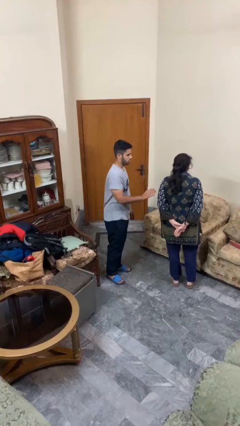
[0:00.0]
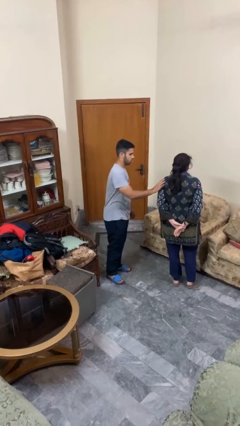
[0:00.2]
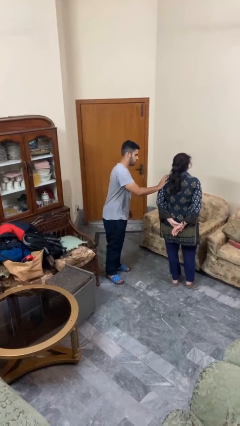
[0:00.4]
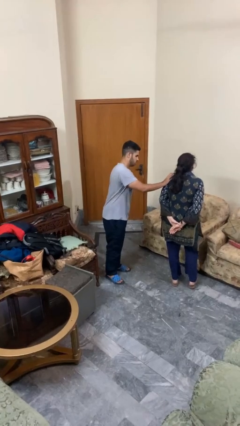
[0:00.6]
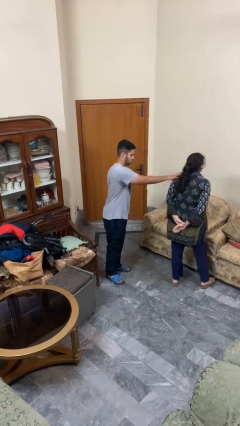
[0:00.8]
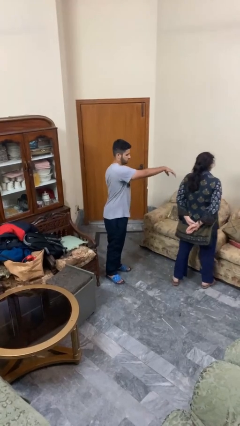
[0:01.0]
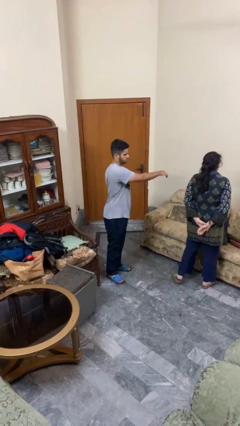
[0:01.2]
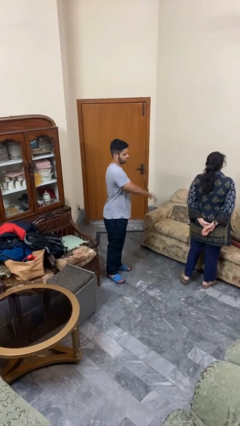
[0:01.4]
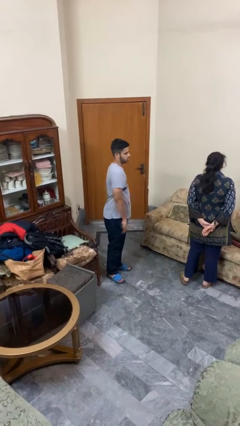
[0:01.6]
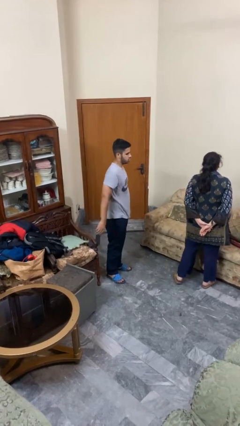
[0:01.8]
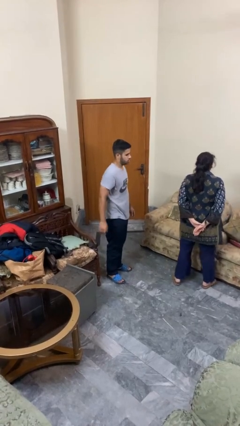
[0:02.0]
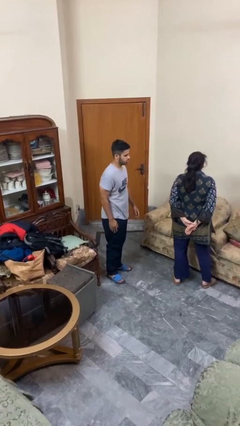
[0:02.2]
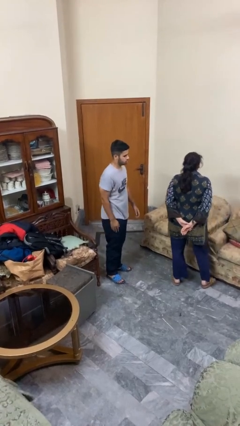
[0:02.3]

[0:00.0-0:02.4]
person shoves person

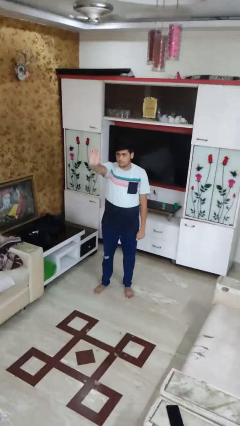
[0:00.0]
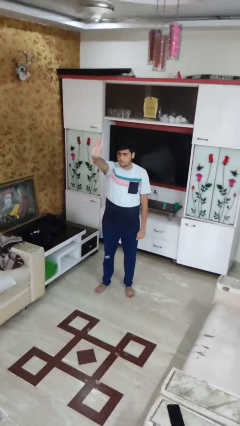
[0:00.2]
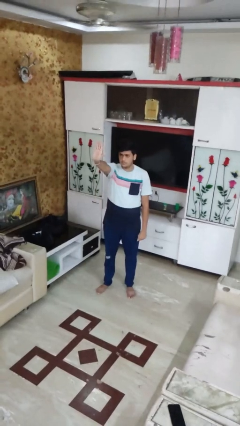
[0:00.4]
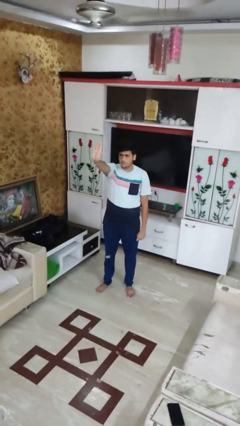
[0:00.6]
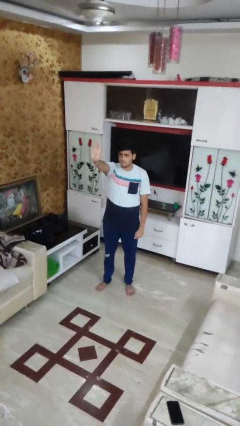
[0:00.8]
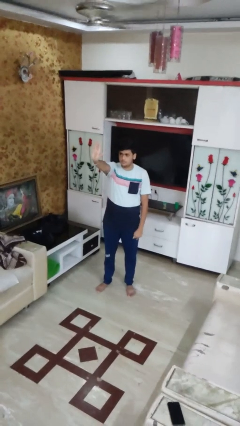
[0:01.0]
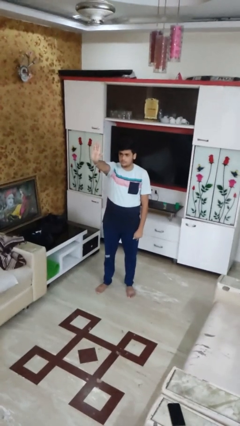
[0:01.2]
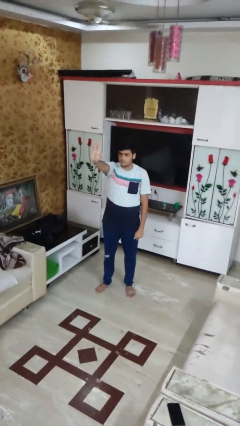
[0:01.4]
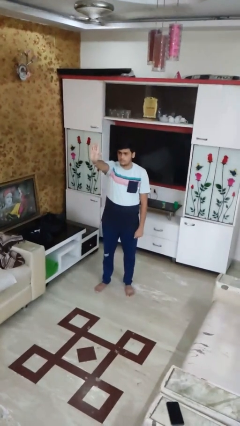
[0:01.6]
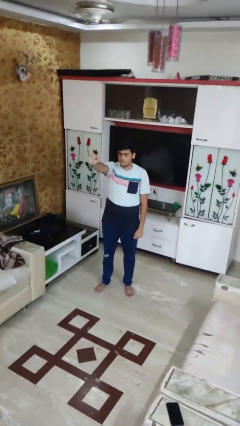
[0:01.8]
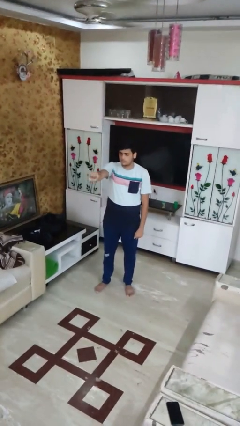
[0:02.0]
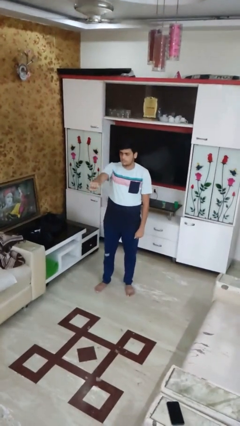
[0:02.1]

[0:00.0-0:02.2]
person gestures stop

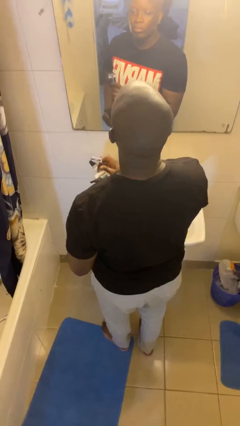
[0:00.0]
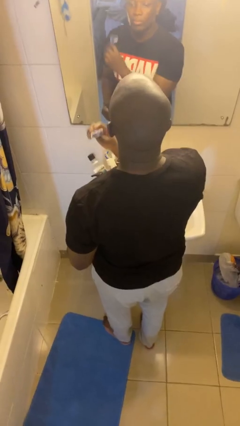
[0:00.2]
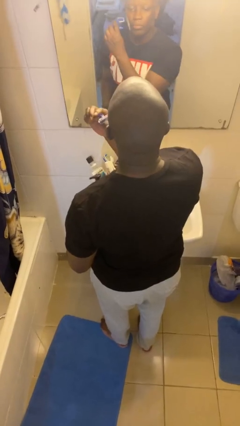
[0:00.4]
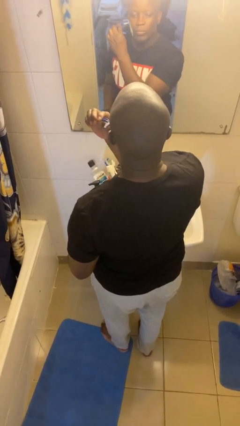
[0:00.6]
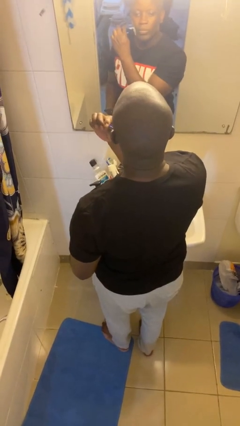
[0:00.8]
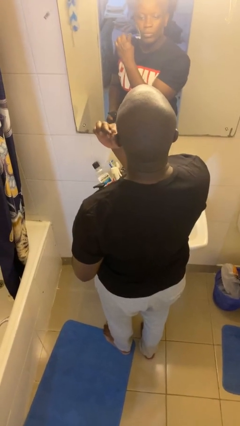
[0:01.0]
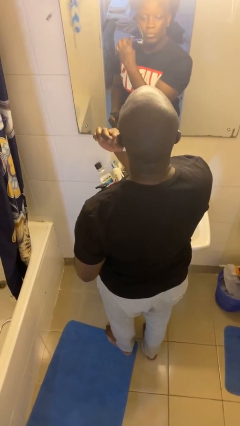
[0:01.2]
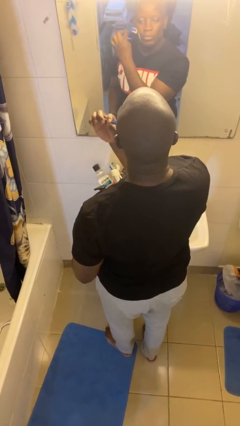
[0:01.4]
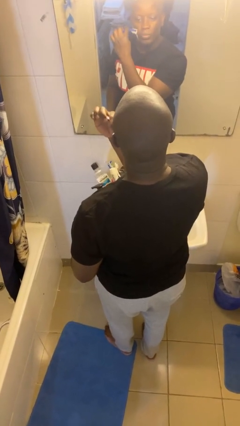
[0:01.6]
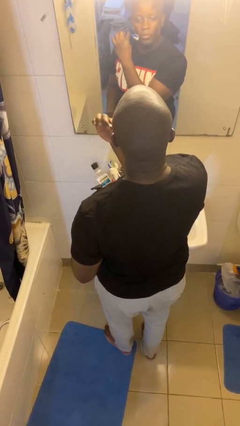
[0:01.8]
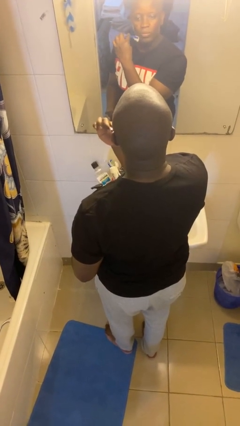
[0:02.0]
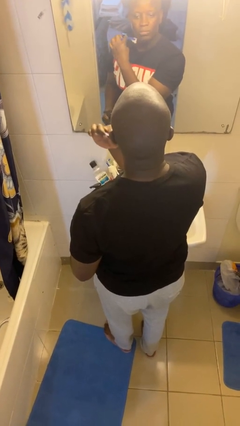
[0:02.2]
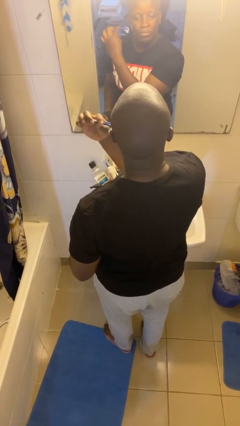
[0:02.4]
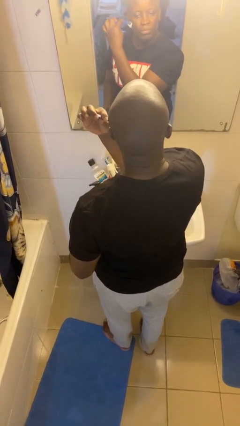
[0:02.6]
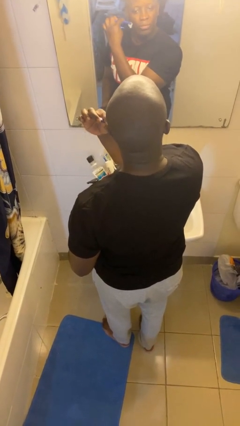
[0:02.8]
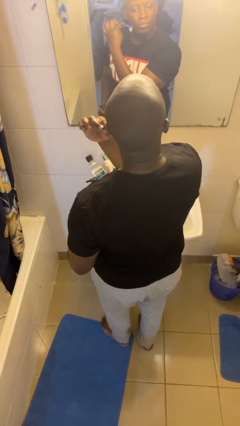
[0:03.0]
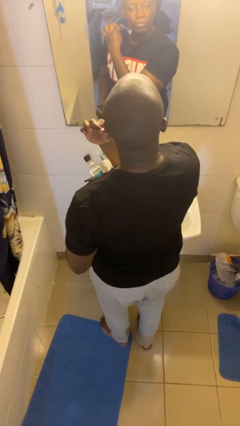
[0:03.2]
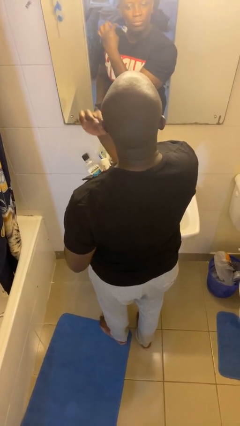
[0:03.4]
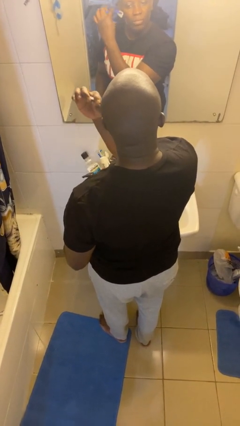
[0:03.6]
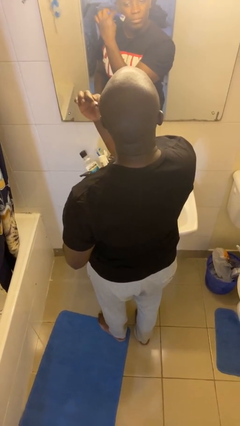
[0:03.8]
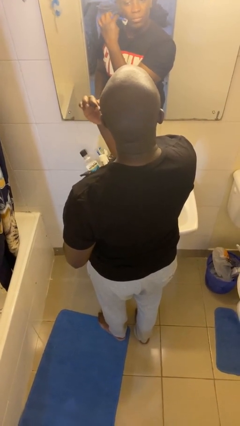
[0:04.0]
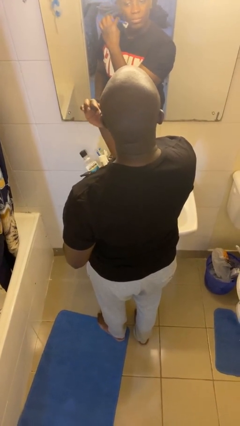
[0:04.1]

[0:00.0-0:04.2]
person shaves face

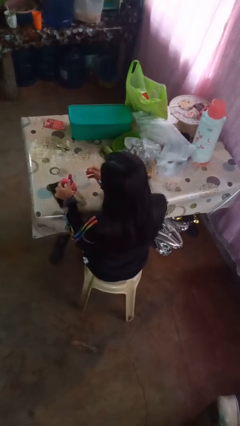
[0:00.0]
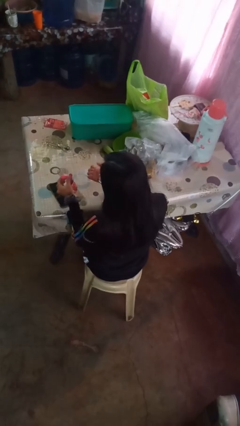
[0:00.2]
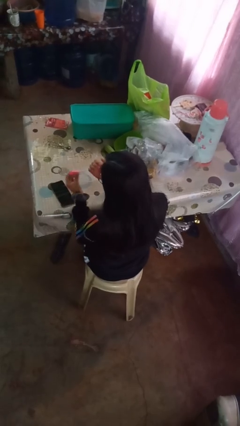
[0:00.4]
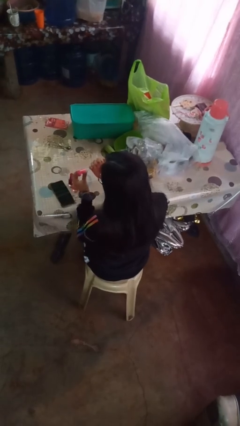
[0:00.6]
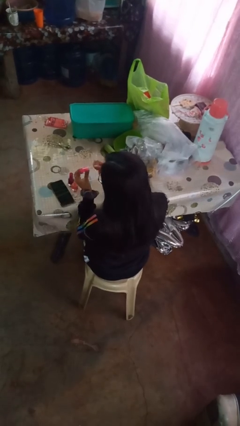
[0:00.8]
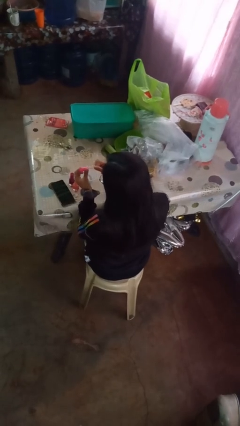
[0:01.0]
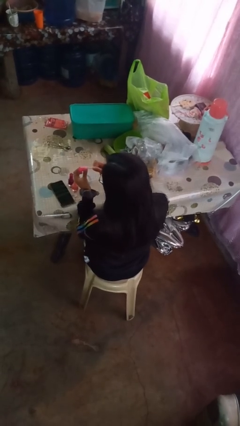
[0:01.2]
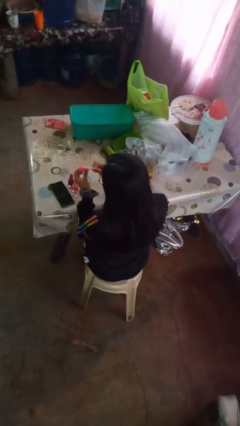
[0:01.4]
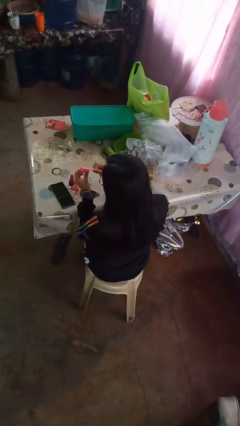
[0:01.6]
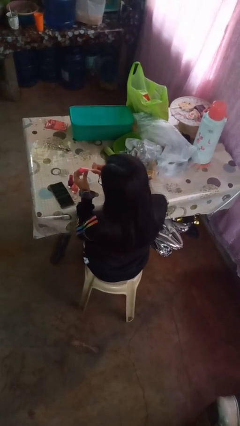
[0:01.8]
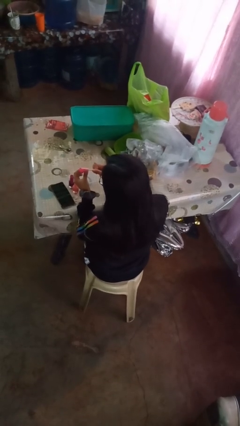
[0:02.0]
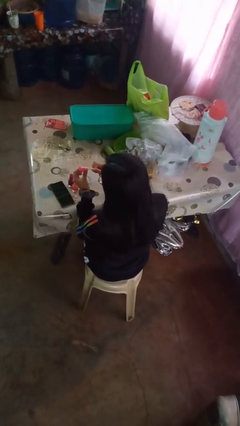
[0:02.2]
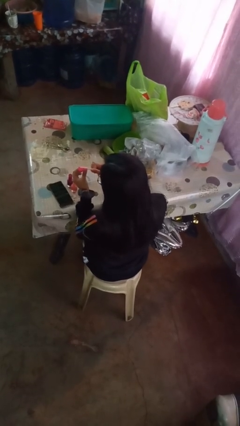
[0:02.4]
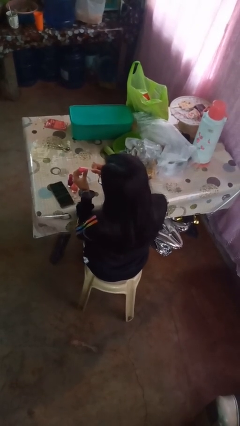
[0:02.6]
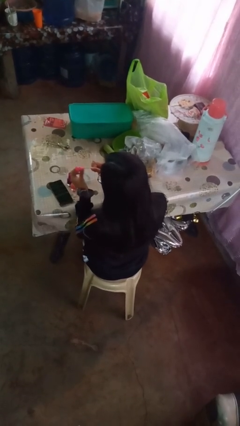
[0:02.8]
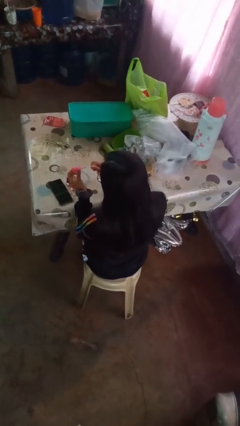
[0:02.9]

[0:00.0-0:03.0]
person paints fingernails

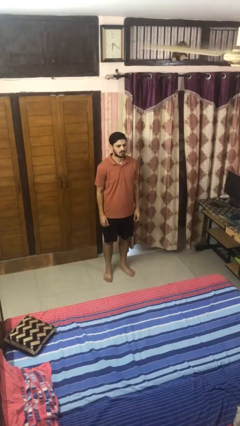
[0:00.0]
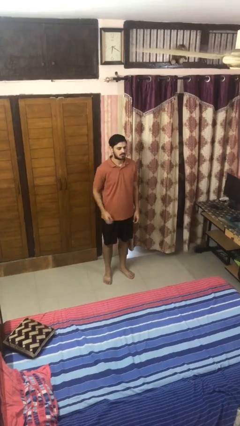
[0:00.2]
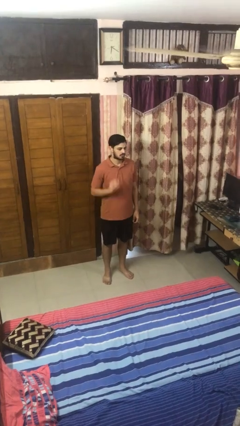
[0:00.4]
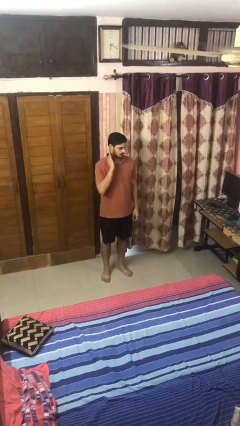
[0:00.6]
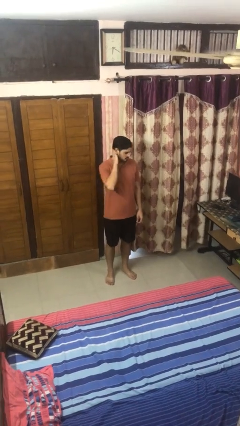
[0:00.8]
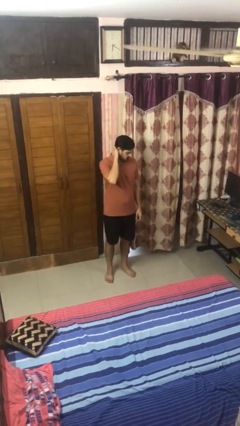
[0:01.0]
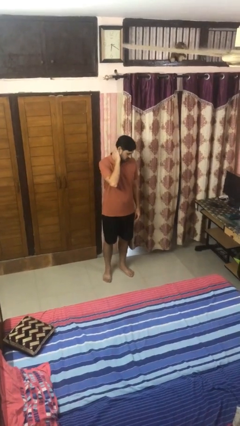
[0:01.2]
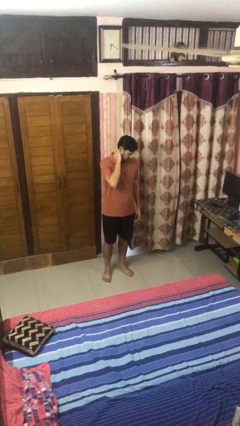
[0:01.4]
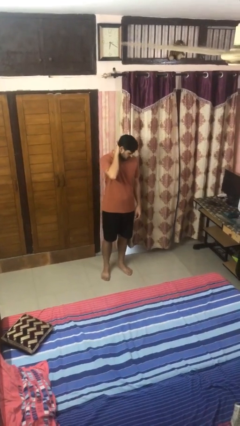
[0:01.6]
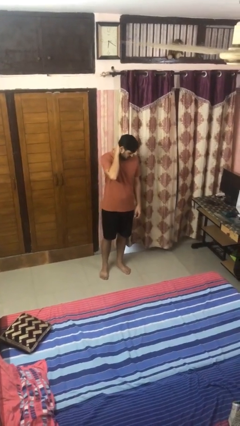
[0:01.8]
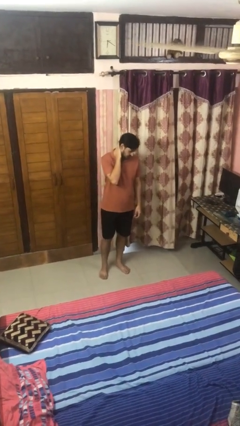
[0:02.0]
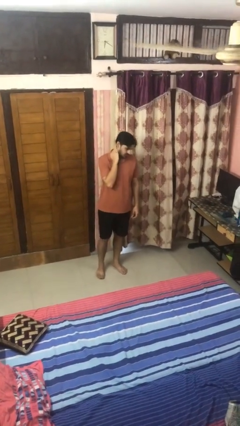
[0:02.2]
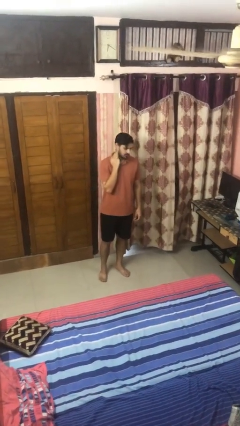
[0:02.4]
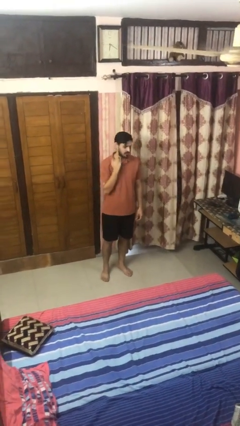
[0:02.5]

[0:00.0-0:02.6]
person rubs neck

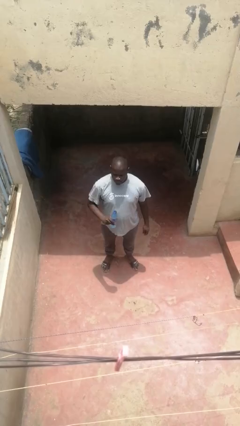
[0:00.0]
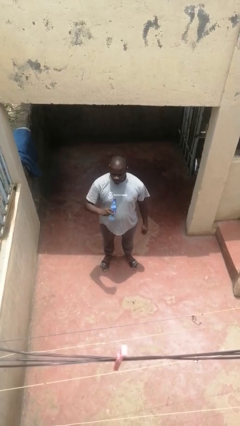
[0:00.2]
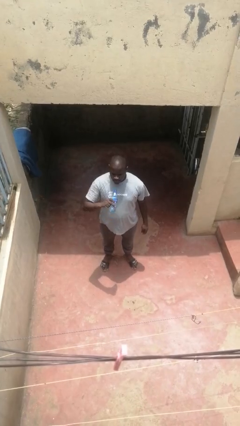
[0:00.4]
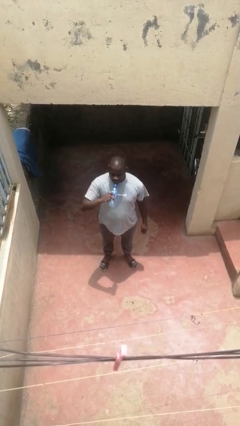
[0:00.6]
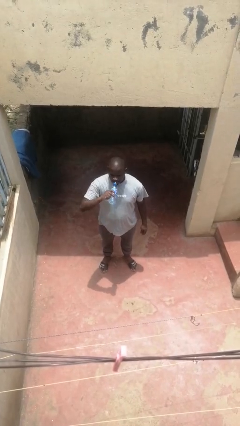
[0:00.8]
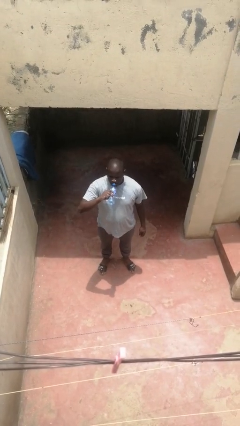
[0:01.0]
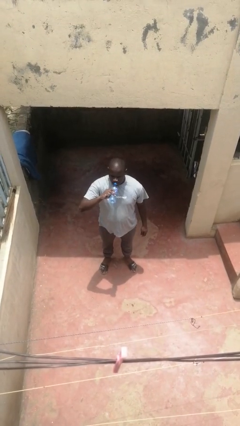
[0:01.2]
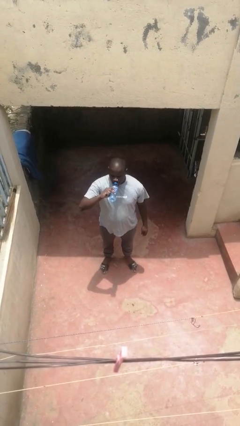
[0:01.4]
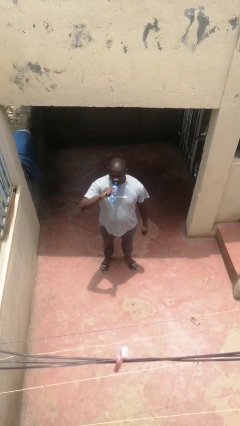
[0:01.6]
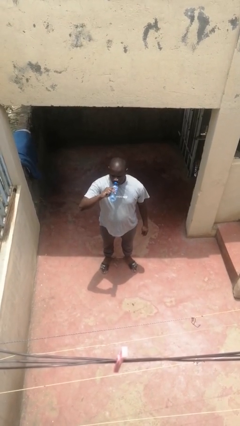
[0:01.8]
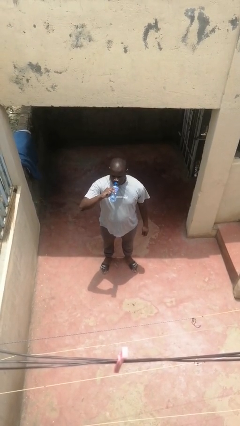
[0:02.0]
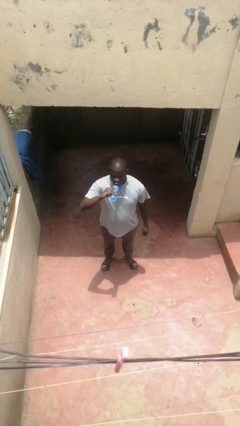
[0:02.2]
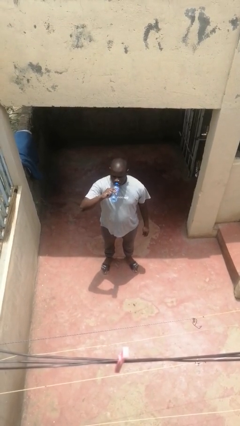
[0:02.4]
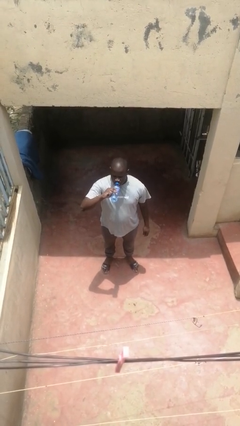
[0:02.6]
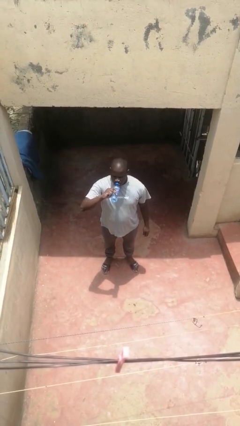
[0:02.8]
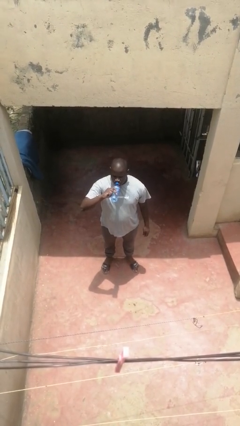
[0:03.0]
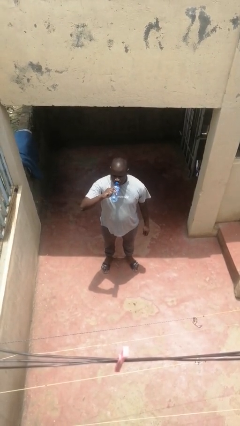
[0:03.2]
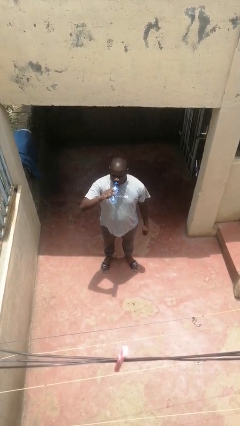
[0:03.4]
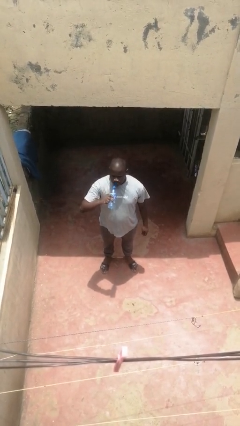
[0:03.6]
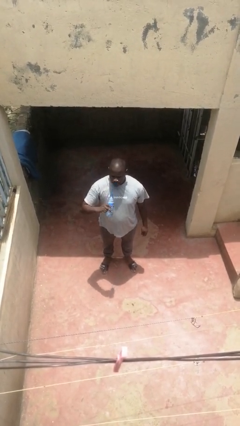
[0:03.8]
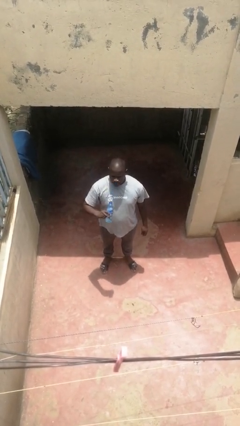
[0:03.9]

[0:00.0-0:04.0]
person drinks from bottle
